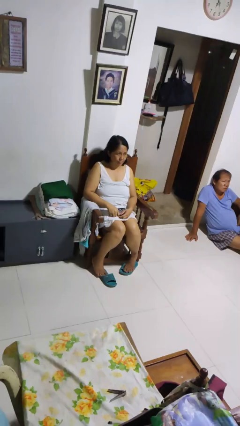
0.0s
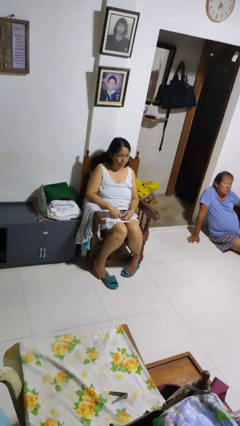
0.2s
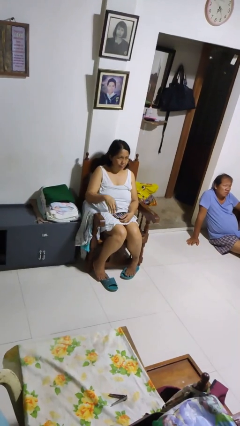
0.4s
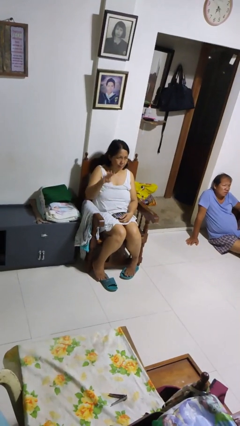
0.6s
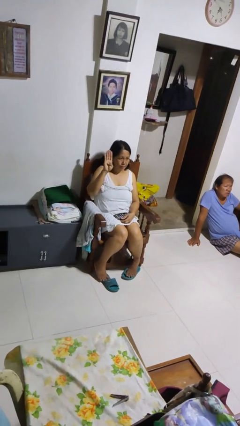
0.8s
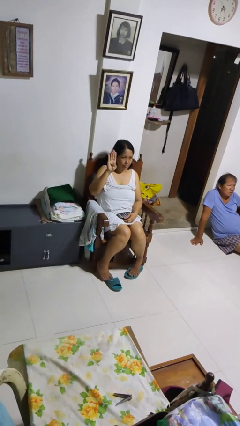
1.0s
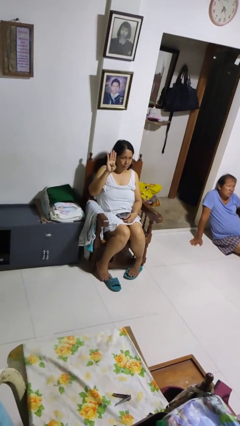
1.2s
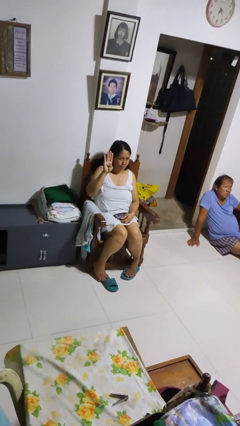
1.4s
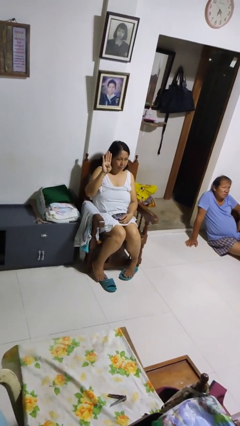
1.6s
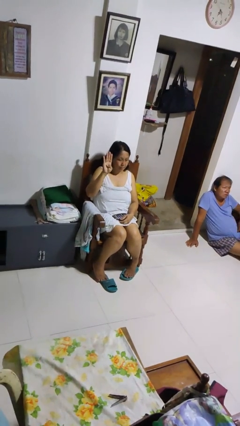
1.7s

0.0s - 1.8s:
person gestures number four

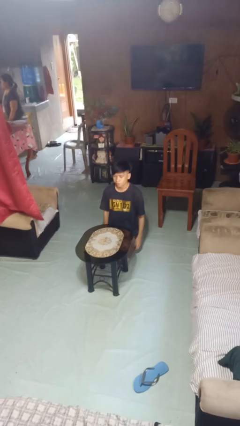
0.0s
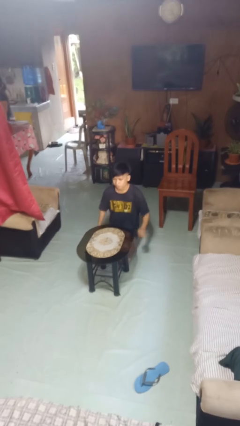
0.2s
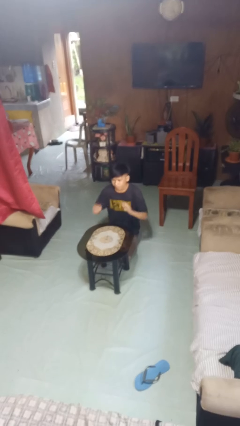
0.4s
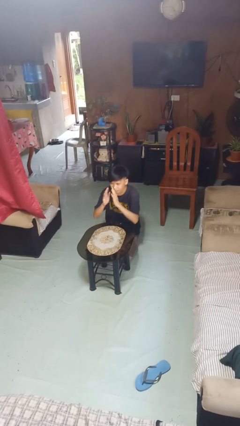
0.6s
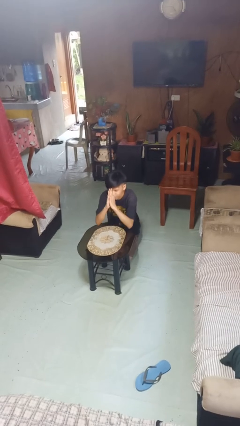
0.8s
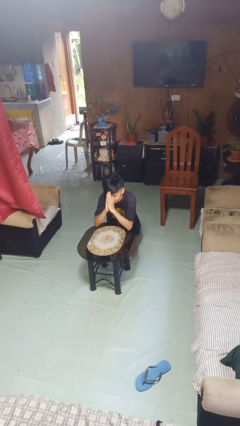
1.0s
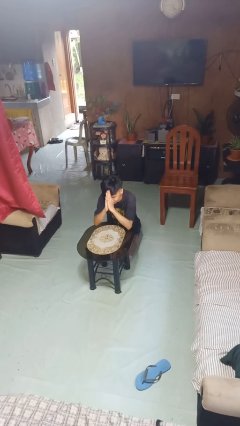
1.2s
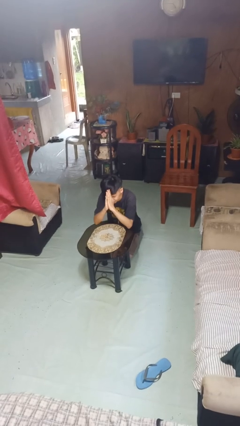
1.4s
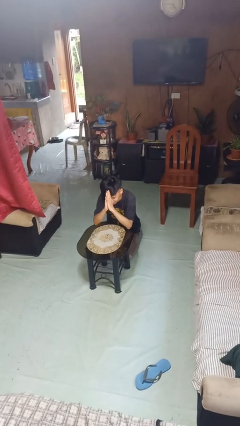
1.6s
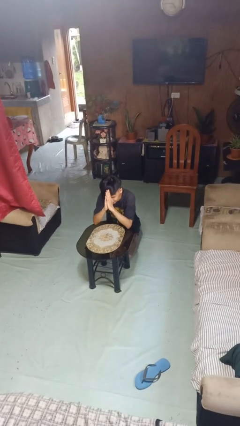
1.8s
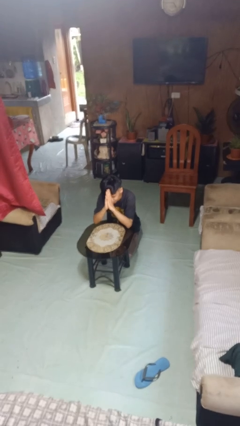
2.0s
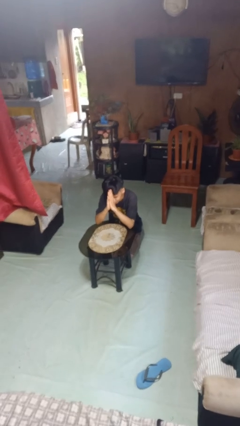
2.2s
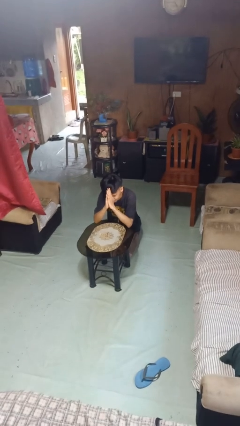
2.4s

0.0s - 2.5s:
person prays

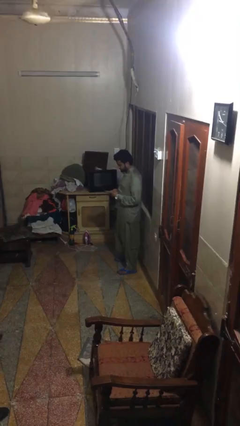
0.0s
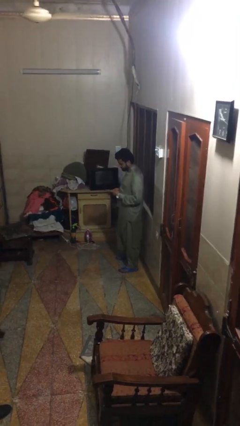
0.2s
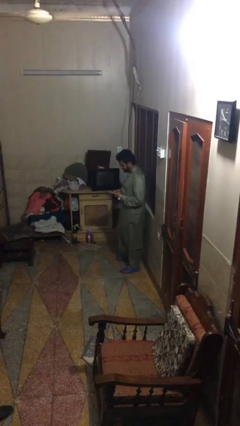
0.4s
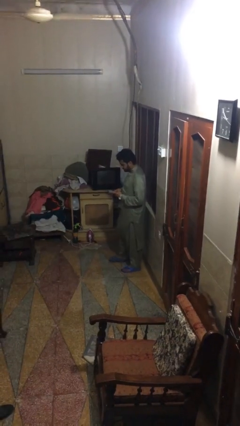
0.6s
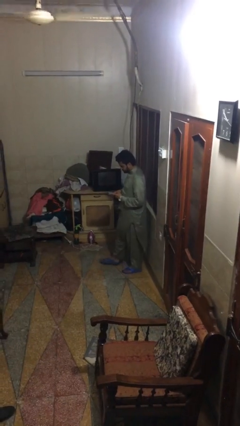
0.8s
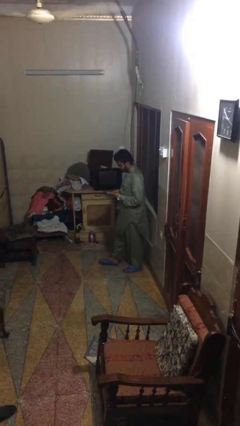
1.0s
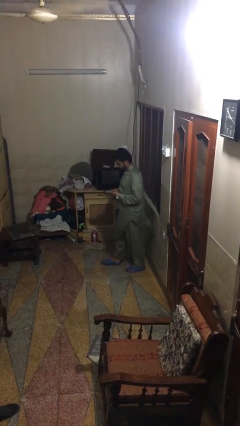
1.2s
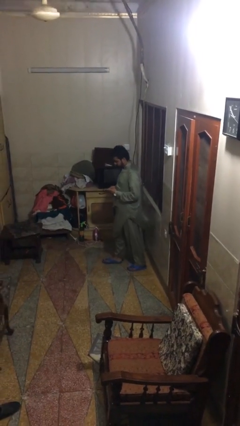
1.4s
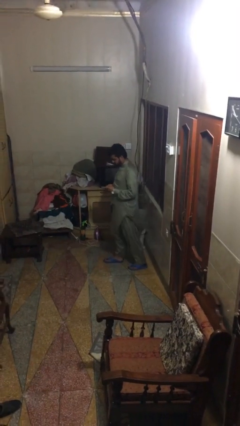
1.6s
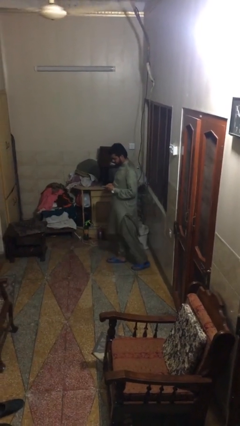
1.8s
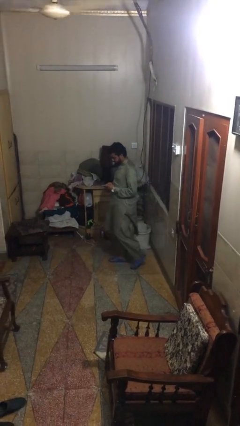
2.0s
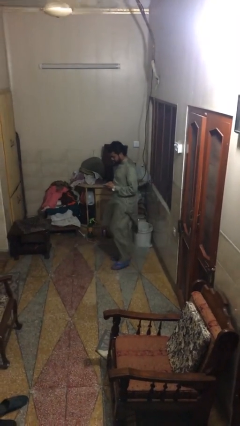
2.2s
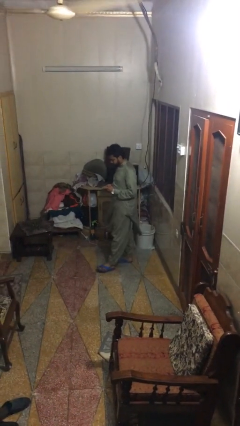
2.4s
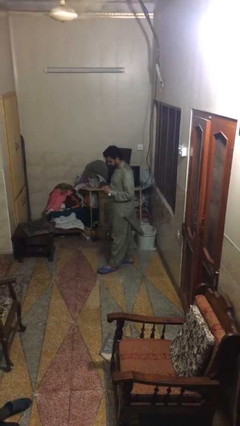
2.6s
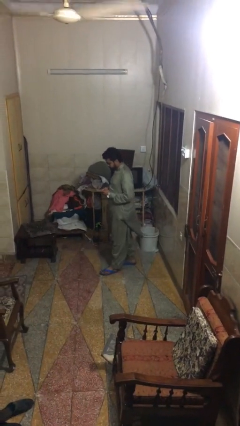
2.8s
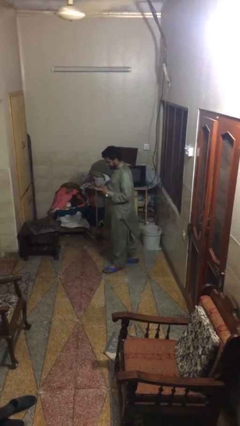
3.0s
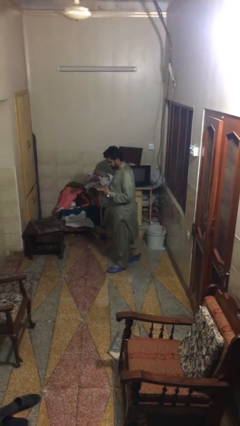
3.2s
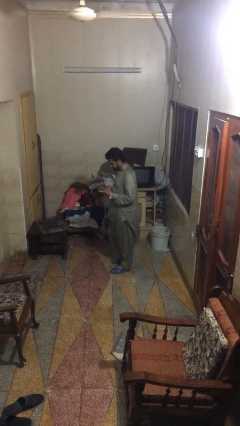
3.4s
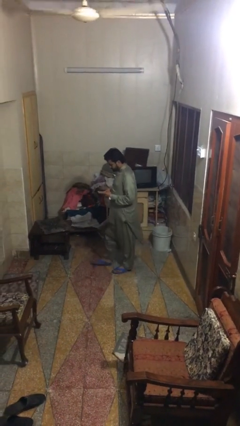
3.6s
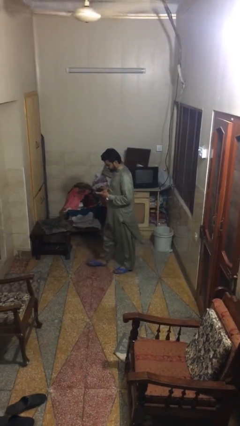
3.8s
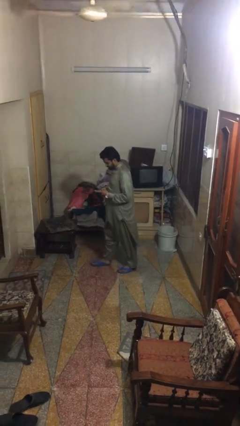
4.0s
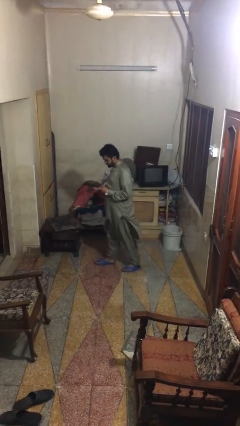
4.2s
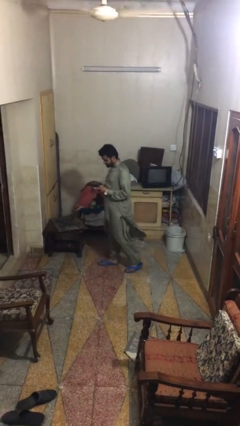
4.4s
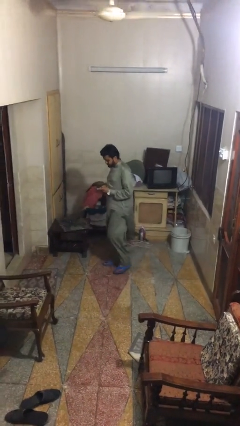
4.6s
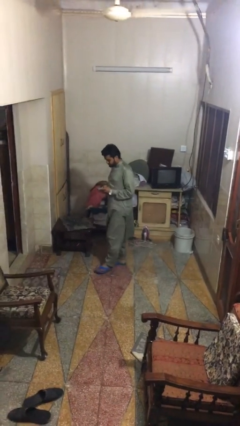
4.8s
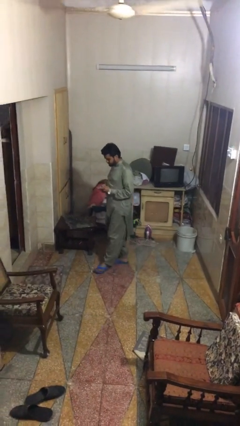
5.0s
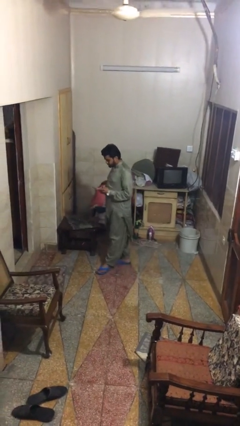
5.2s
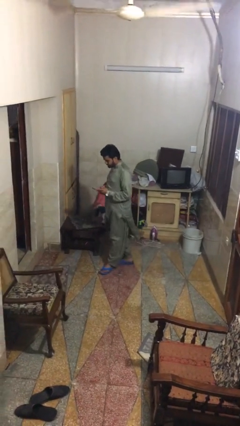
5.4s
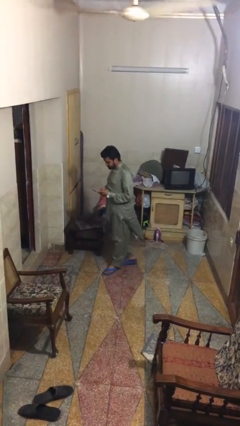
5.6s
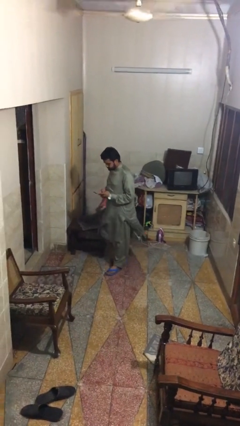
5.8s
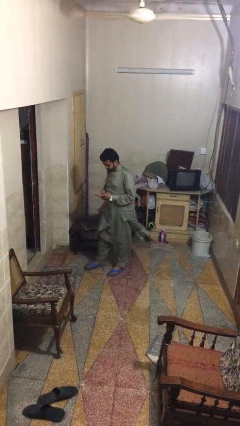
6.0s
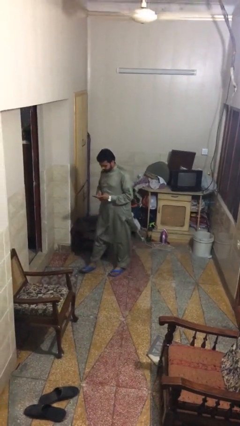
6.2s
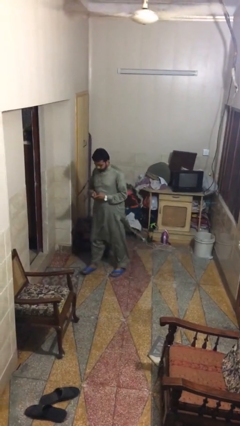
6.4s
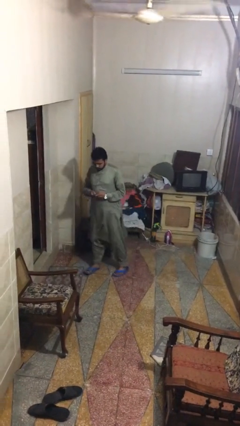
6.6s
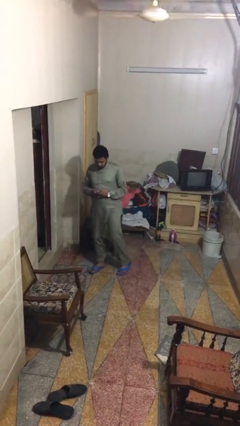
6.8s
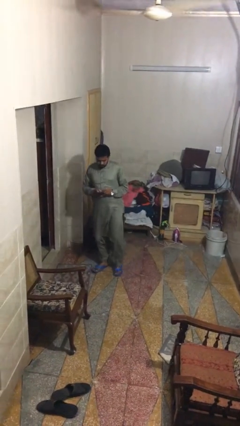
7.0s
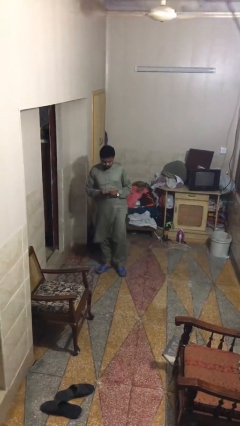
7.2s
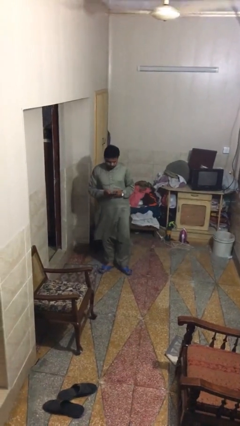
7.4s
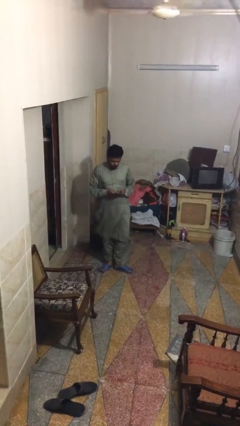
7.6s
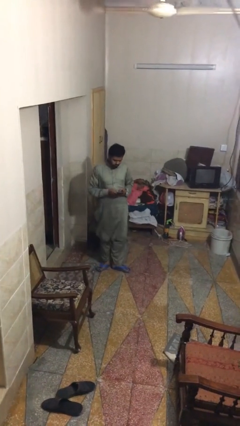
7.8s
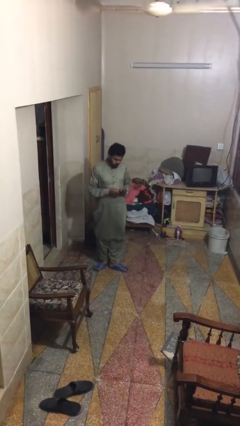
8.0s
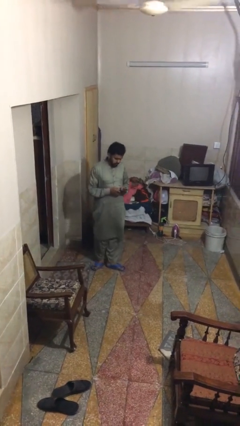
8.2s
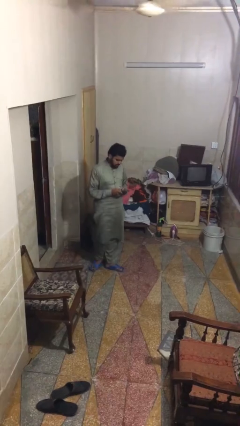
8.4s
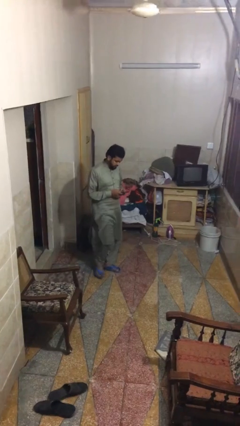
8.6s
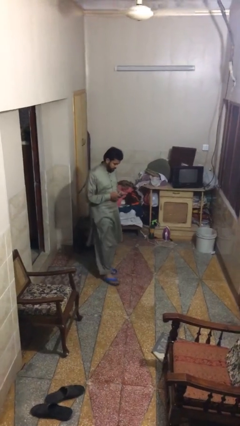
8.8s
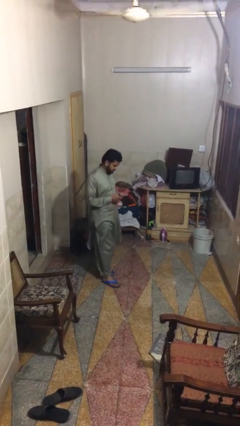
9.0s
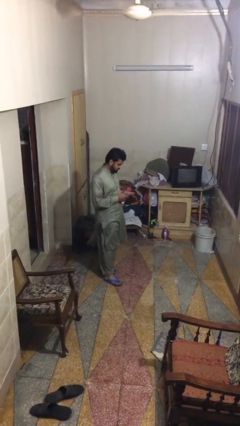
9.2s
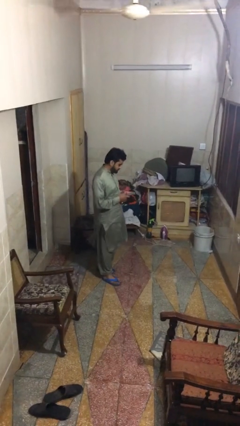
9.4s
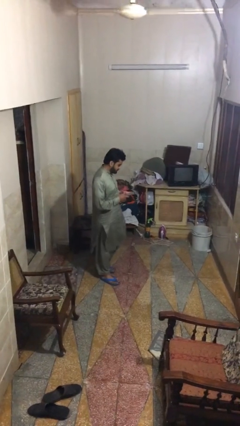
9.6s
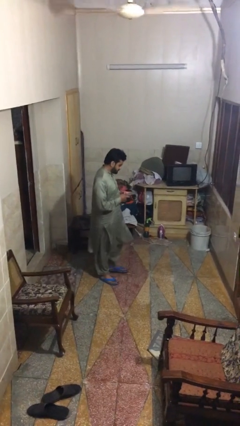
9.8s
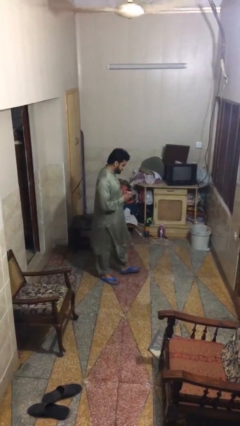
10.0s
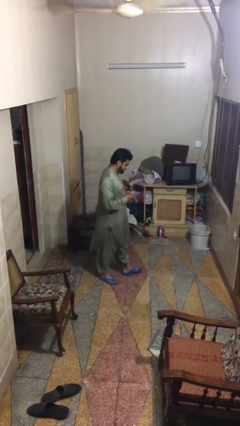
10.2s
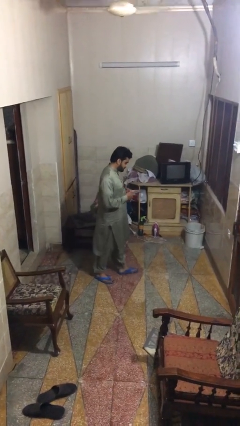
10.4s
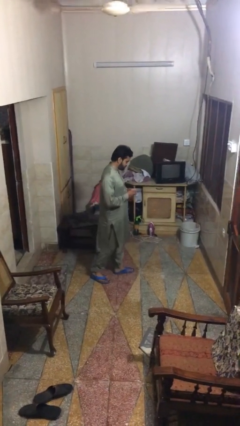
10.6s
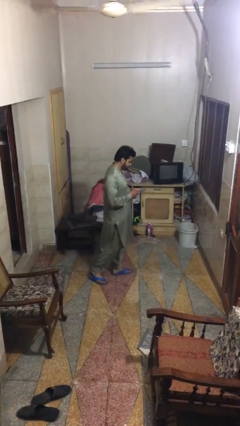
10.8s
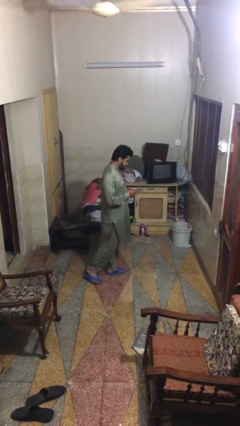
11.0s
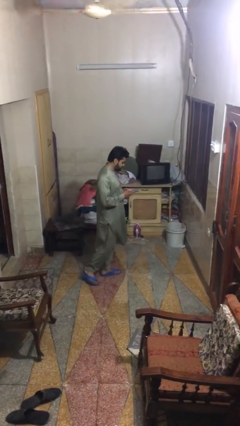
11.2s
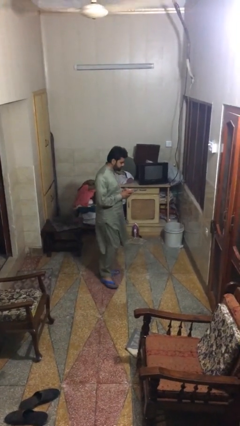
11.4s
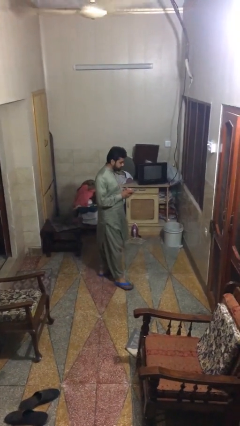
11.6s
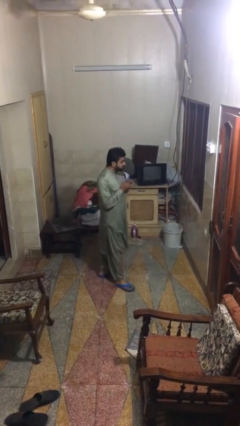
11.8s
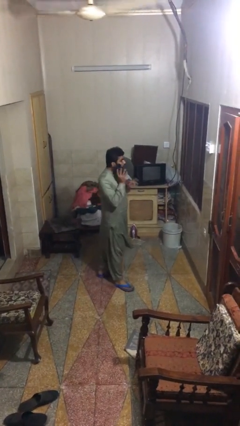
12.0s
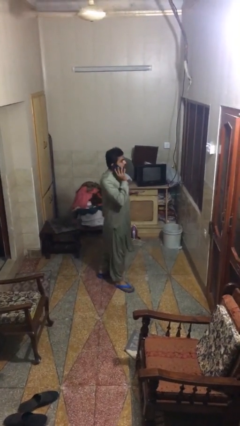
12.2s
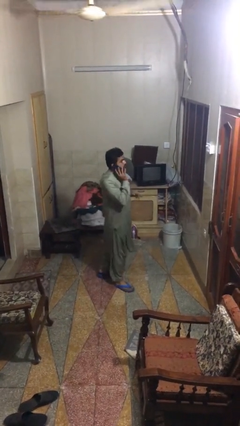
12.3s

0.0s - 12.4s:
person texts on phone

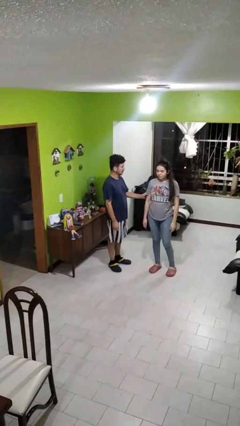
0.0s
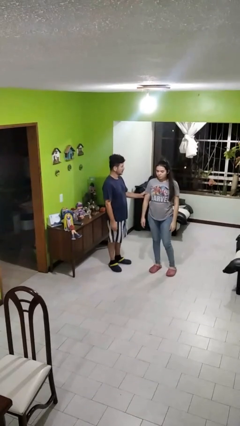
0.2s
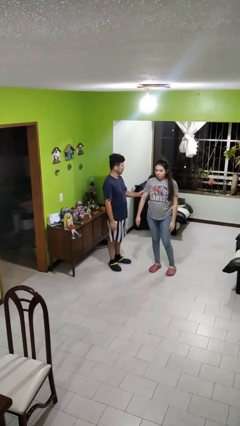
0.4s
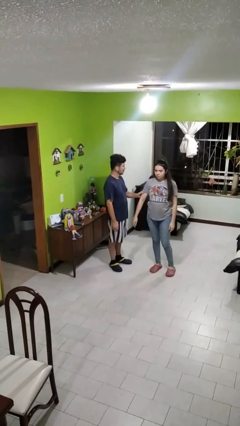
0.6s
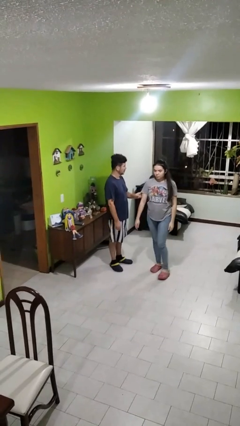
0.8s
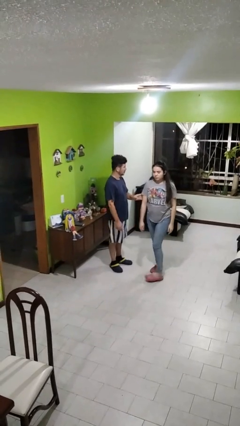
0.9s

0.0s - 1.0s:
person grabs person by bicep

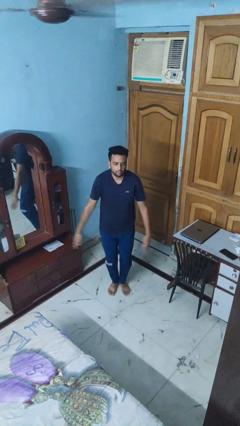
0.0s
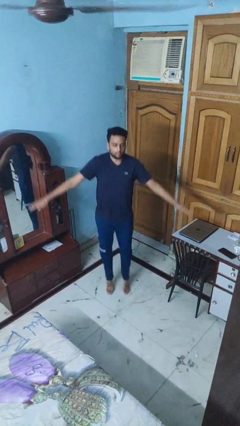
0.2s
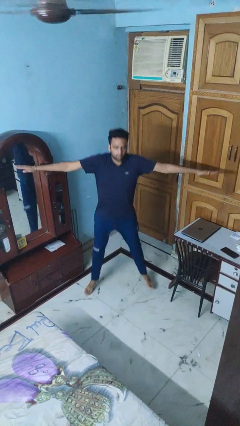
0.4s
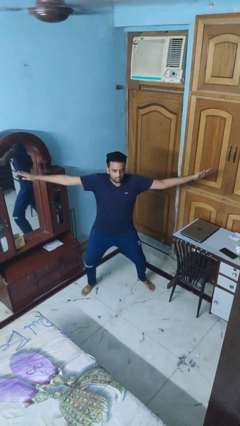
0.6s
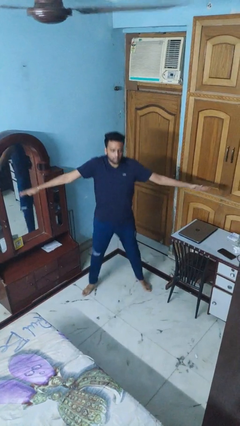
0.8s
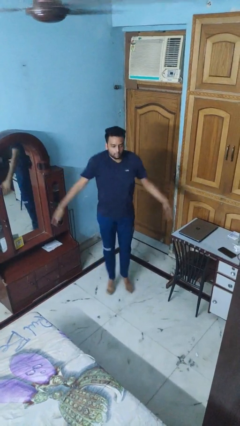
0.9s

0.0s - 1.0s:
person exercises with jumping jacks
